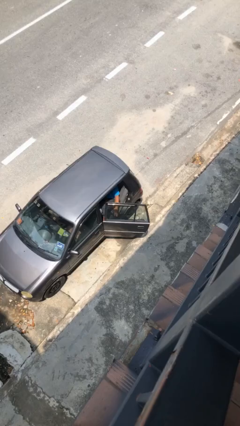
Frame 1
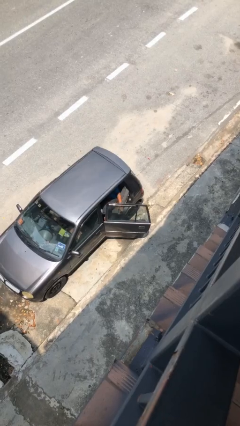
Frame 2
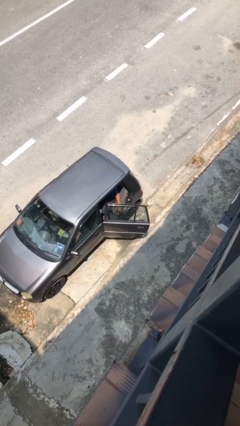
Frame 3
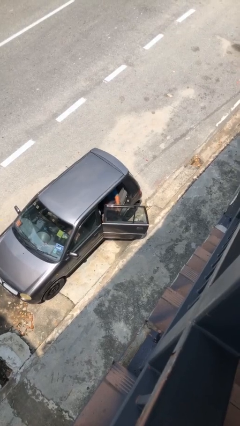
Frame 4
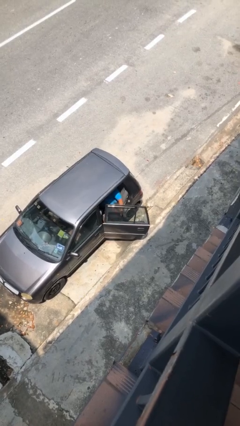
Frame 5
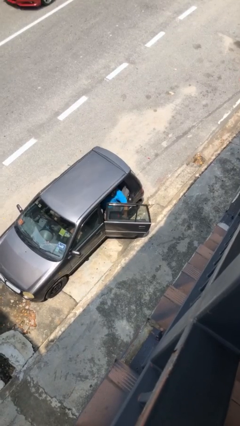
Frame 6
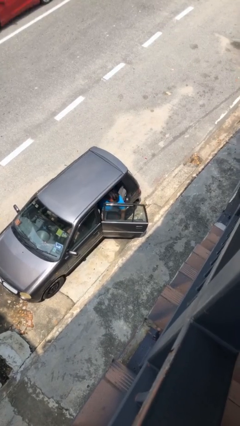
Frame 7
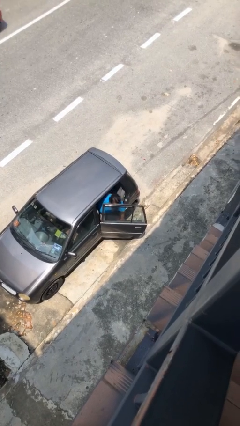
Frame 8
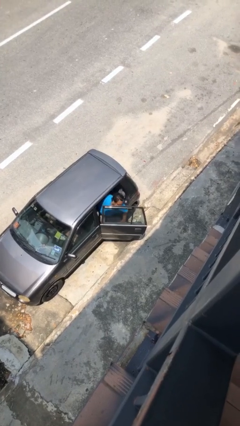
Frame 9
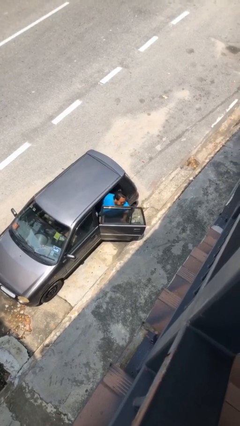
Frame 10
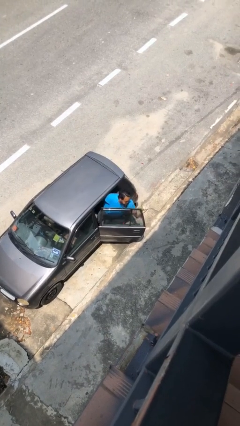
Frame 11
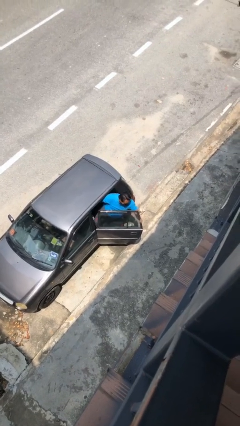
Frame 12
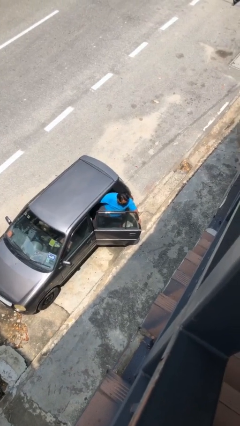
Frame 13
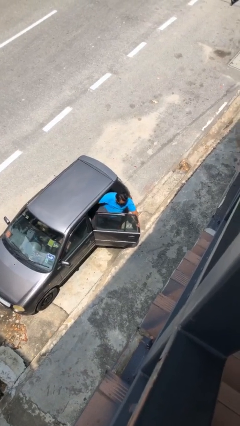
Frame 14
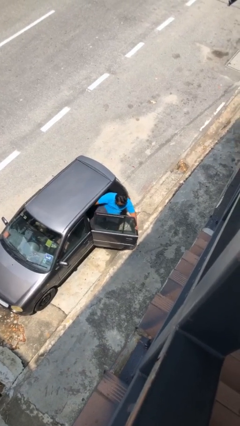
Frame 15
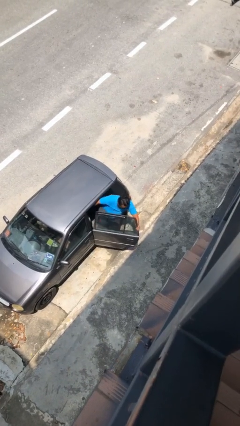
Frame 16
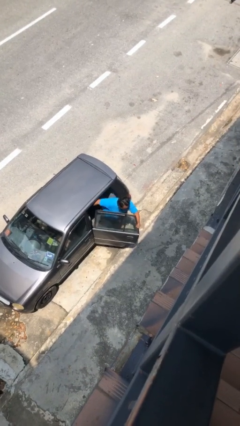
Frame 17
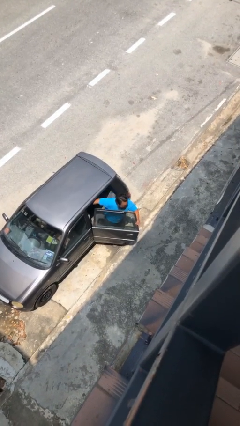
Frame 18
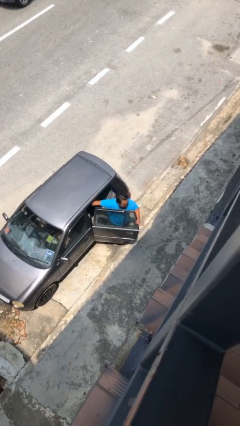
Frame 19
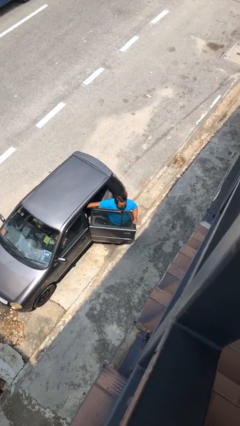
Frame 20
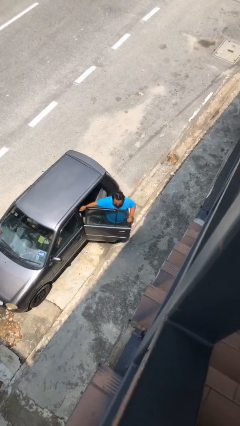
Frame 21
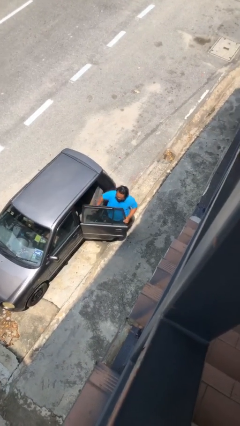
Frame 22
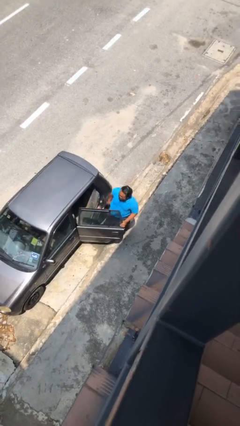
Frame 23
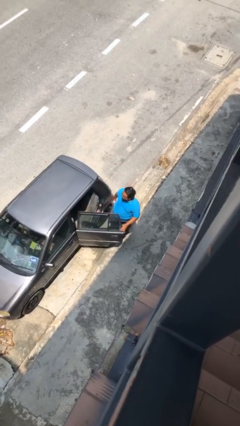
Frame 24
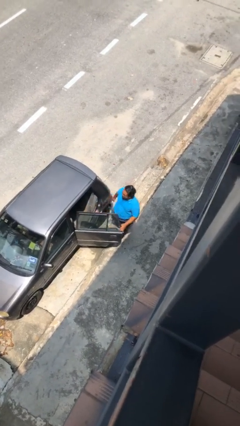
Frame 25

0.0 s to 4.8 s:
person exits car

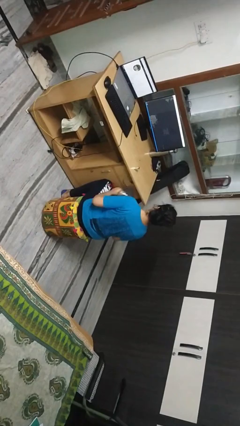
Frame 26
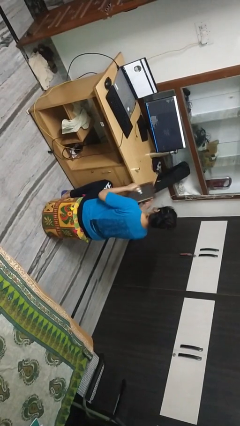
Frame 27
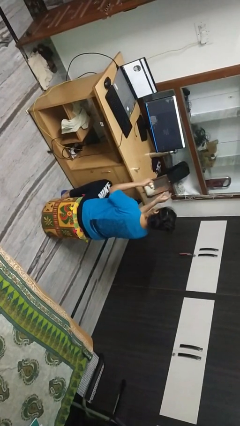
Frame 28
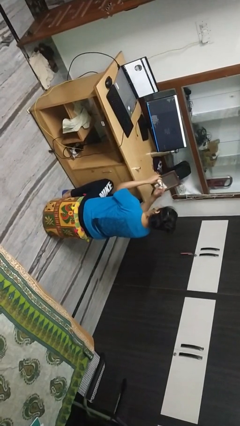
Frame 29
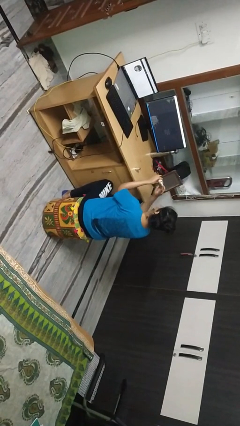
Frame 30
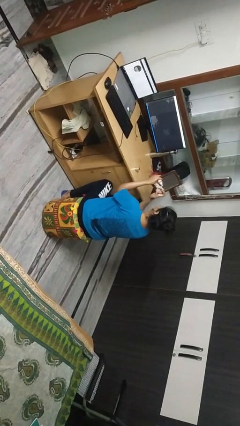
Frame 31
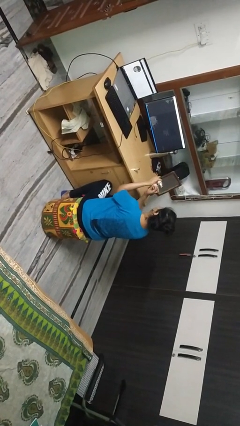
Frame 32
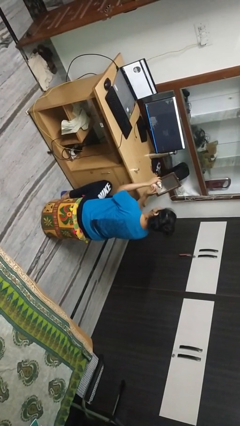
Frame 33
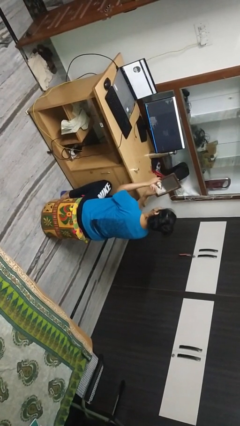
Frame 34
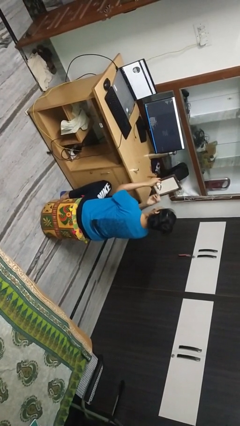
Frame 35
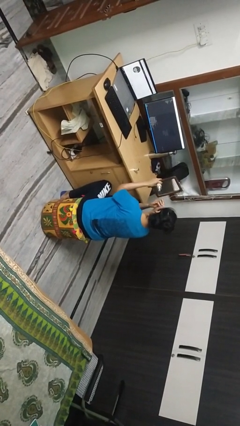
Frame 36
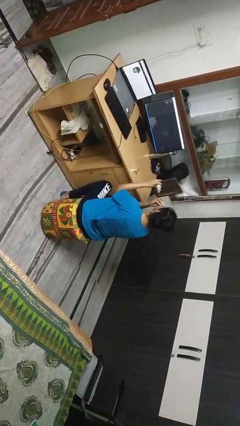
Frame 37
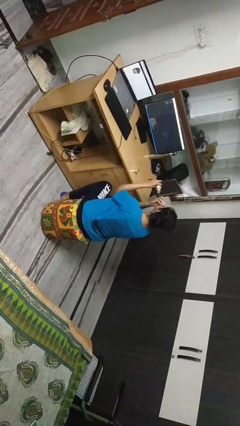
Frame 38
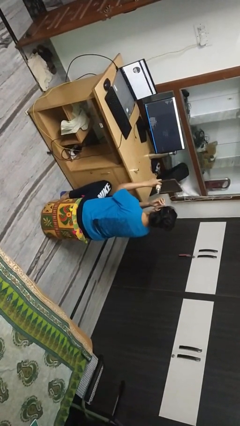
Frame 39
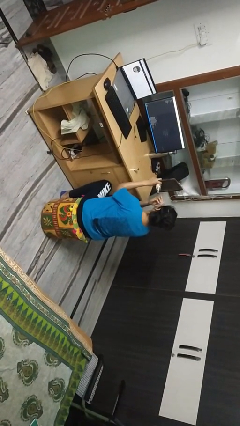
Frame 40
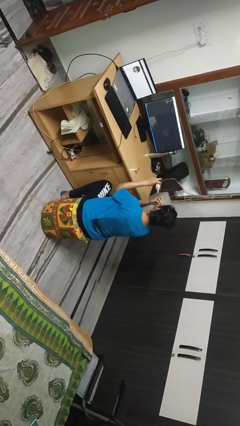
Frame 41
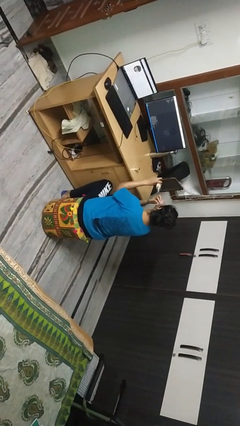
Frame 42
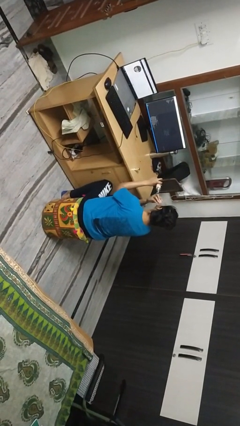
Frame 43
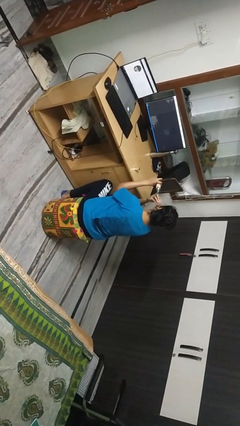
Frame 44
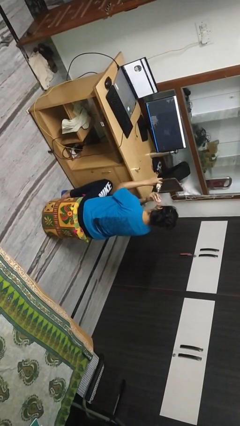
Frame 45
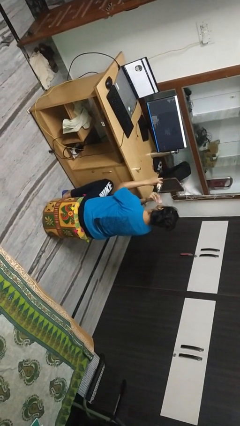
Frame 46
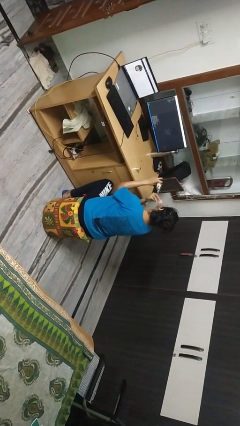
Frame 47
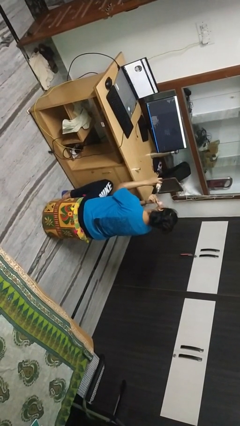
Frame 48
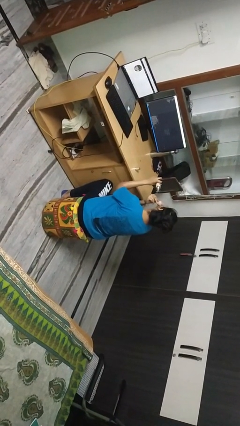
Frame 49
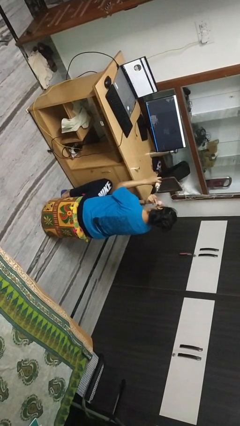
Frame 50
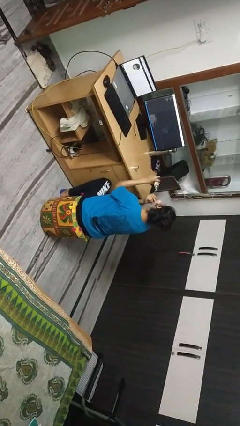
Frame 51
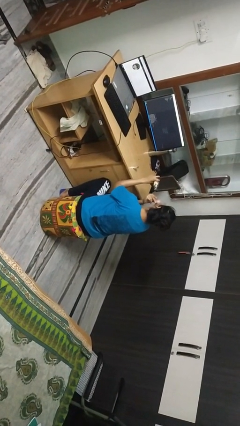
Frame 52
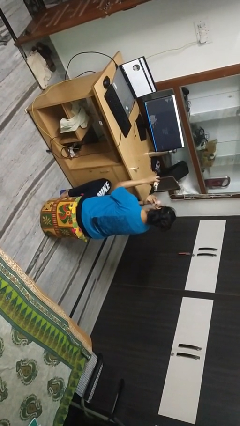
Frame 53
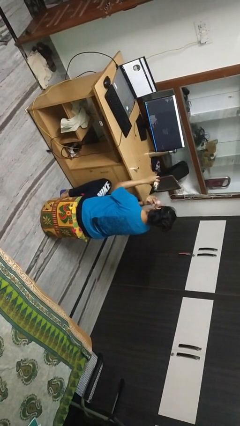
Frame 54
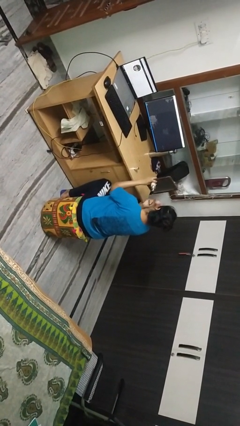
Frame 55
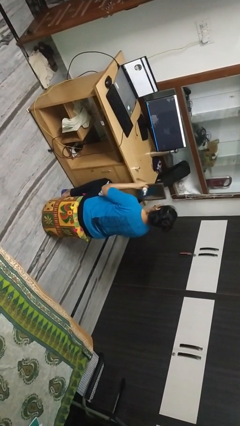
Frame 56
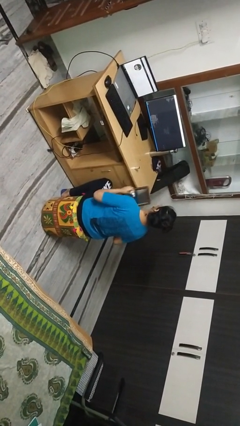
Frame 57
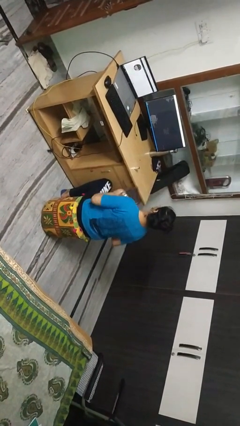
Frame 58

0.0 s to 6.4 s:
person applies foundation makeup

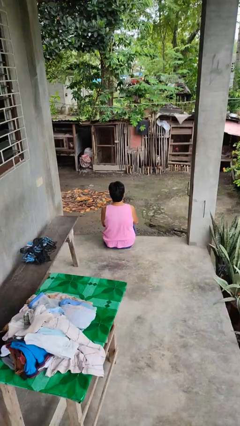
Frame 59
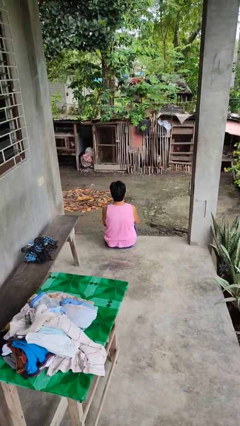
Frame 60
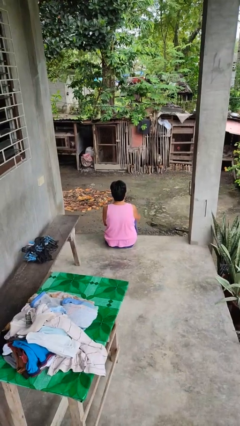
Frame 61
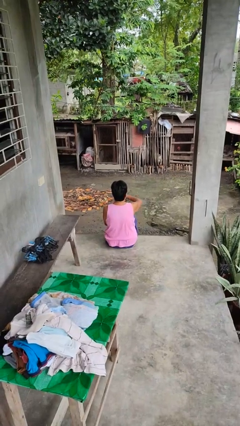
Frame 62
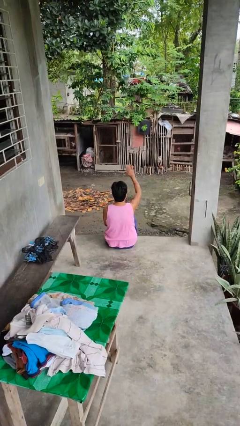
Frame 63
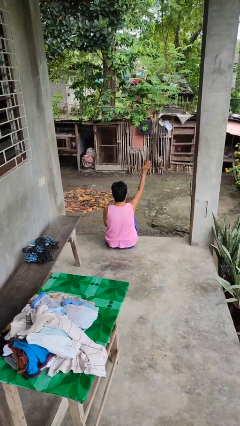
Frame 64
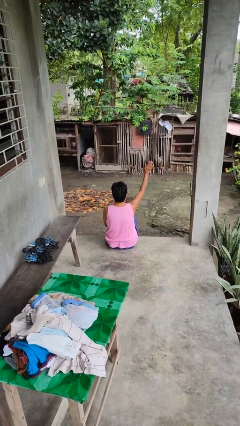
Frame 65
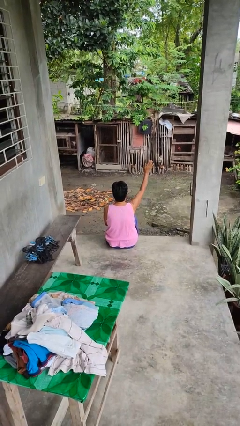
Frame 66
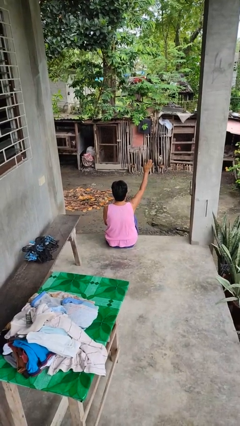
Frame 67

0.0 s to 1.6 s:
person gestures swipe up

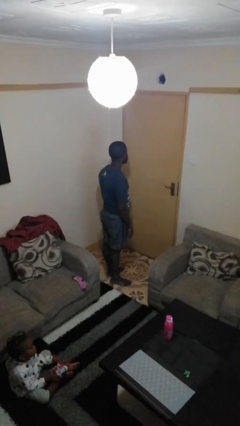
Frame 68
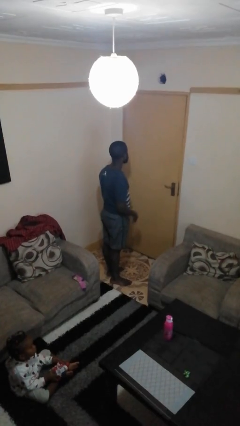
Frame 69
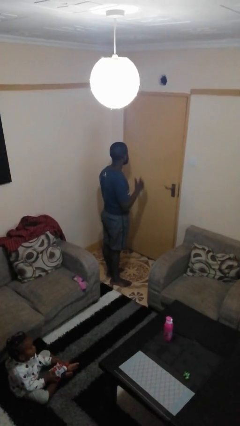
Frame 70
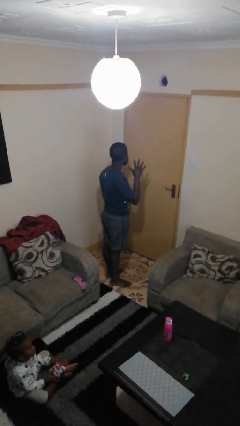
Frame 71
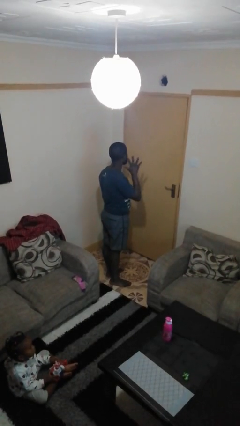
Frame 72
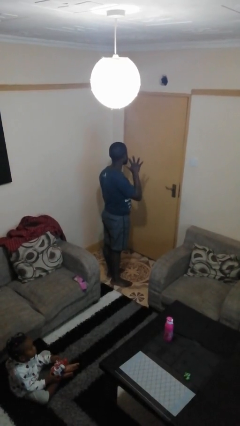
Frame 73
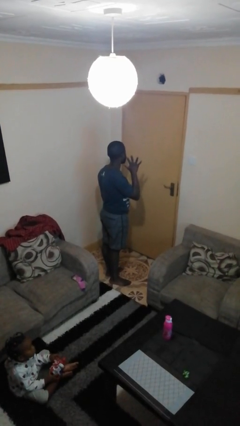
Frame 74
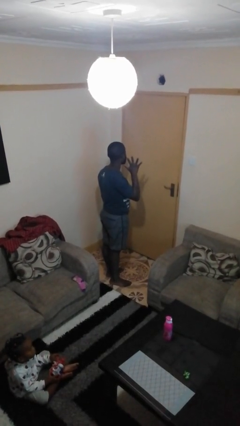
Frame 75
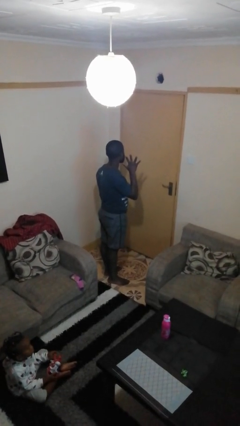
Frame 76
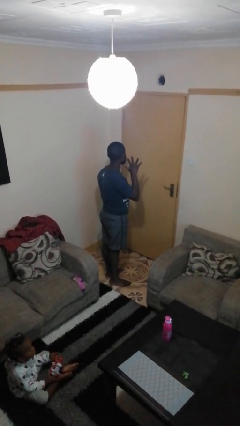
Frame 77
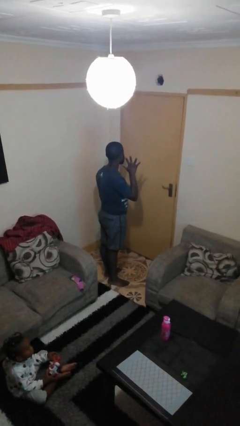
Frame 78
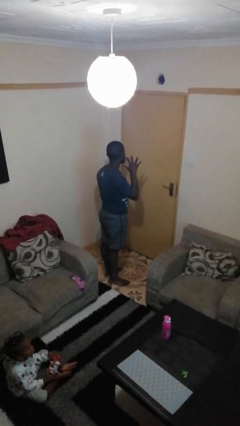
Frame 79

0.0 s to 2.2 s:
person gestures number five

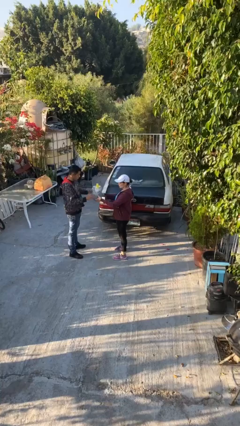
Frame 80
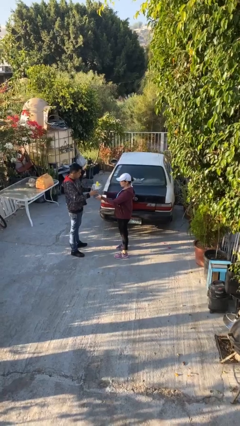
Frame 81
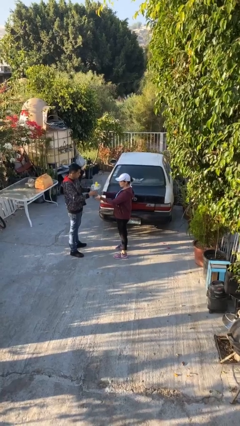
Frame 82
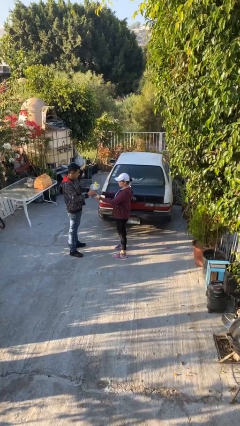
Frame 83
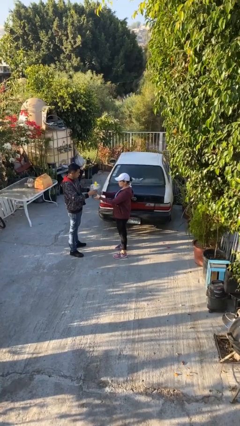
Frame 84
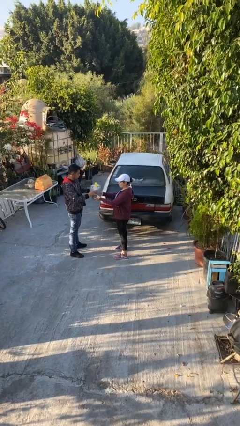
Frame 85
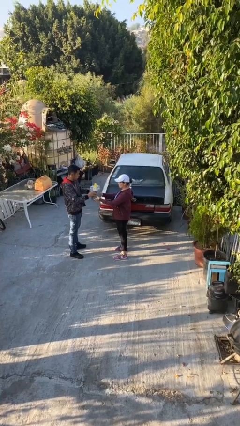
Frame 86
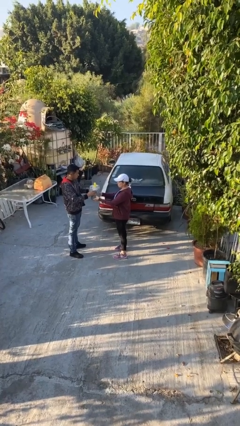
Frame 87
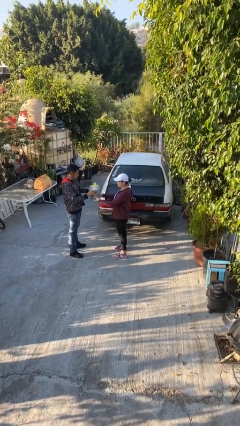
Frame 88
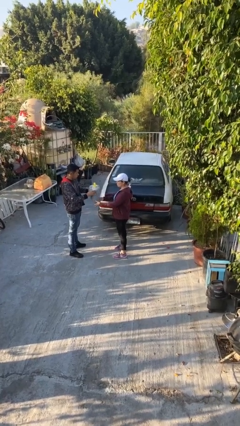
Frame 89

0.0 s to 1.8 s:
person transfers object to person

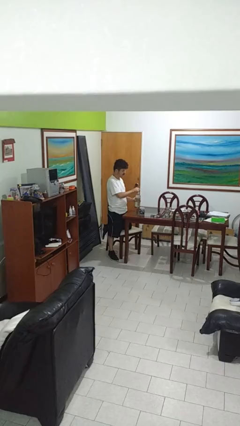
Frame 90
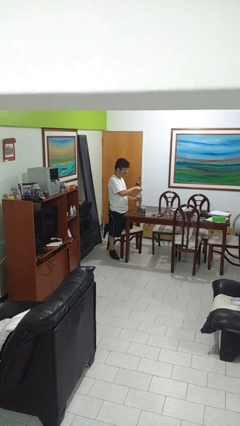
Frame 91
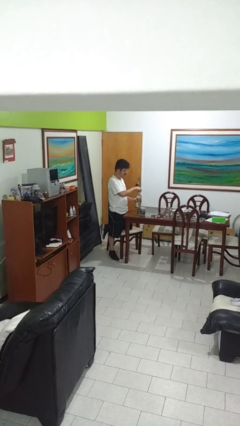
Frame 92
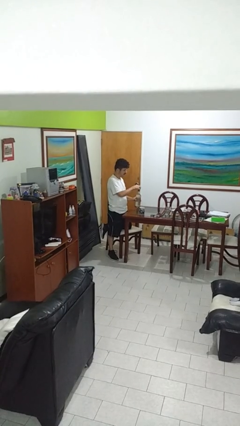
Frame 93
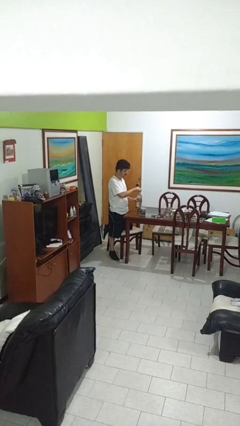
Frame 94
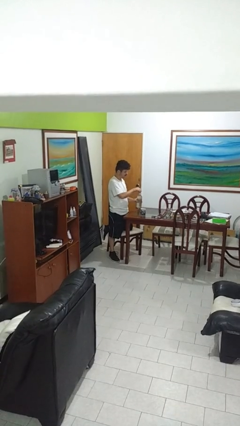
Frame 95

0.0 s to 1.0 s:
person unscrews lid from bottle
